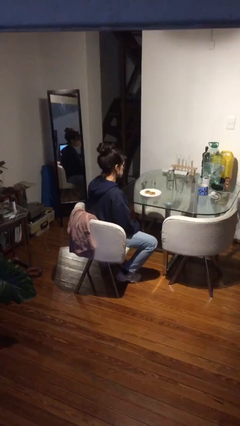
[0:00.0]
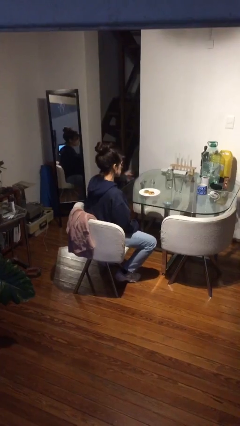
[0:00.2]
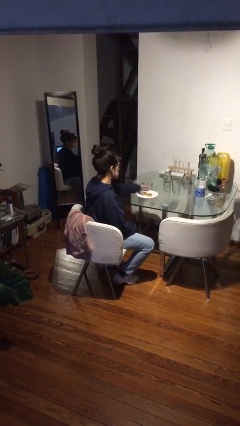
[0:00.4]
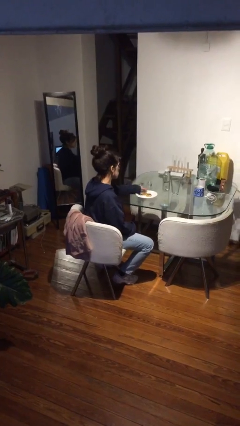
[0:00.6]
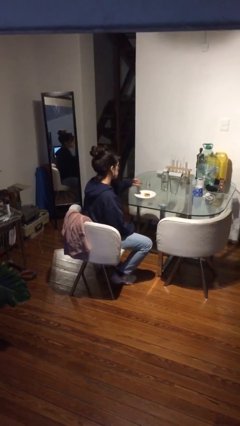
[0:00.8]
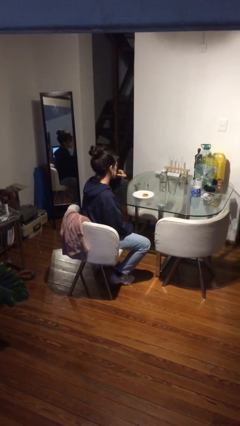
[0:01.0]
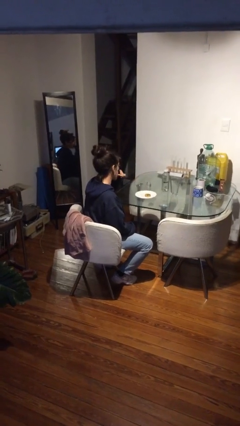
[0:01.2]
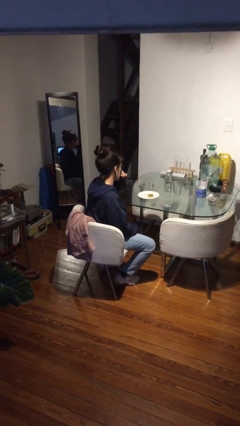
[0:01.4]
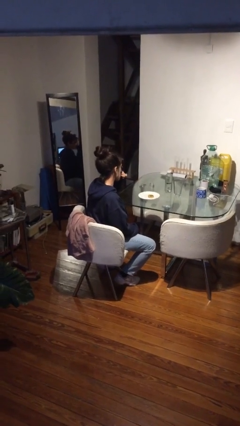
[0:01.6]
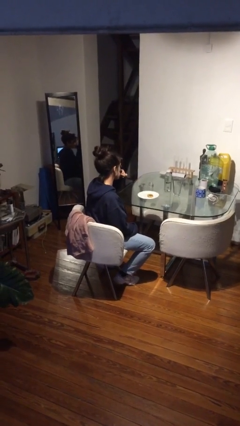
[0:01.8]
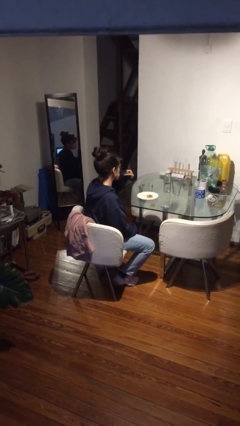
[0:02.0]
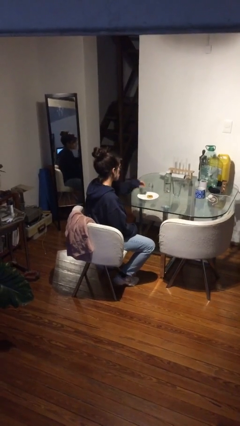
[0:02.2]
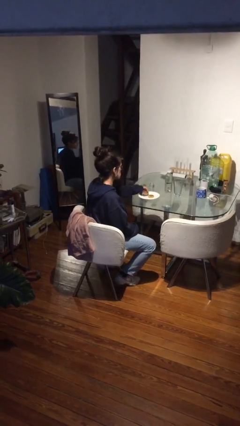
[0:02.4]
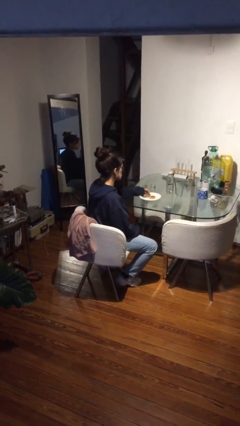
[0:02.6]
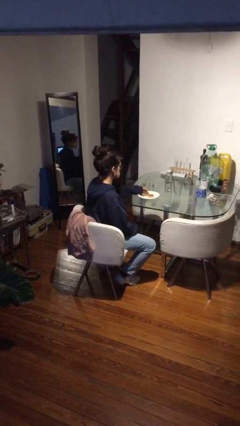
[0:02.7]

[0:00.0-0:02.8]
person eats with hands

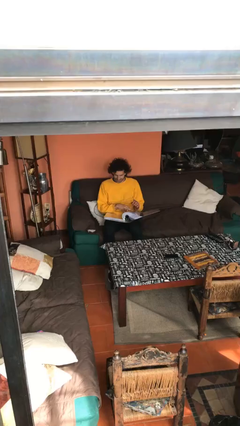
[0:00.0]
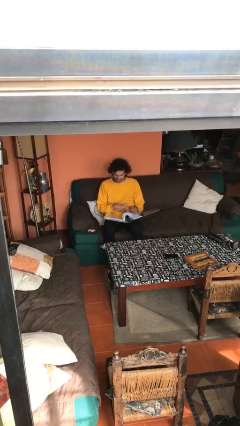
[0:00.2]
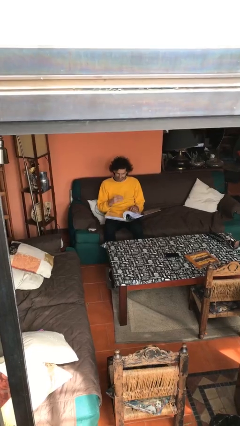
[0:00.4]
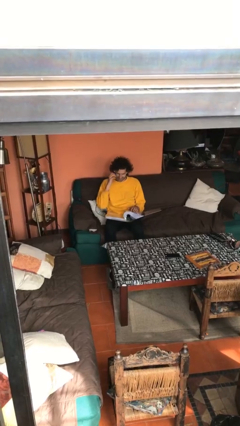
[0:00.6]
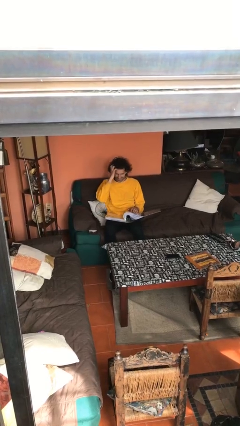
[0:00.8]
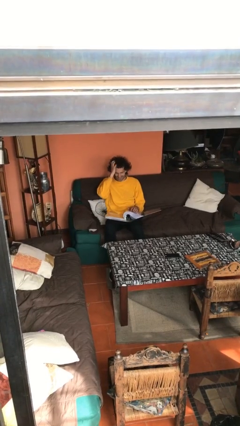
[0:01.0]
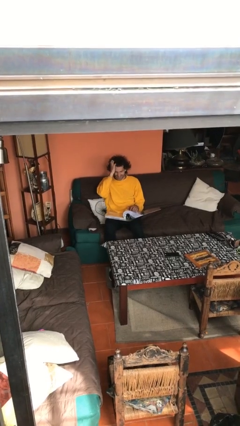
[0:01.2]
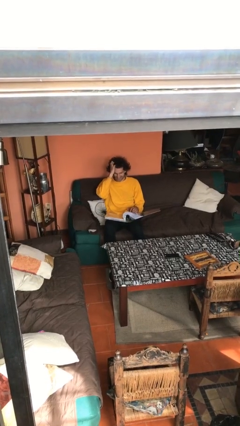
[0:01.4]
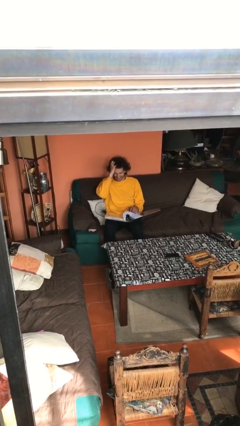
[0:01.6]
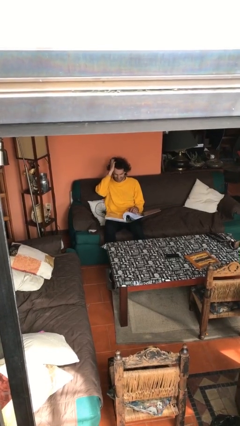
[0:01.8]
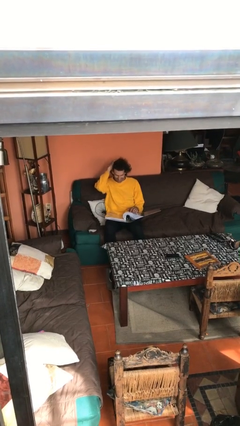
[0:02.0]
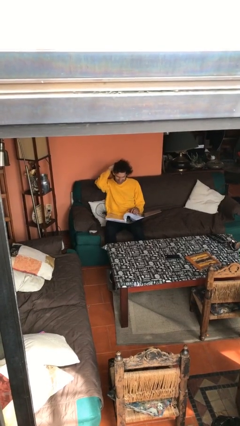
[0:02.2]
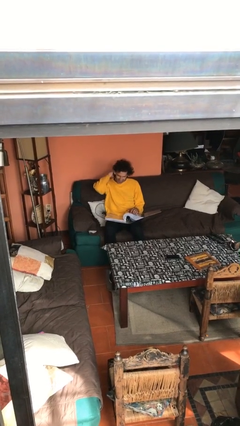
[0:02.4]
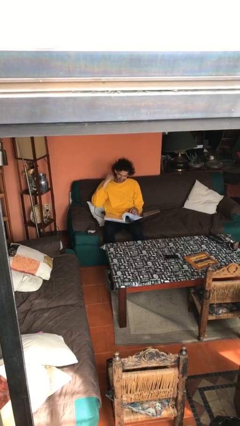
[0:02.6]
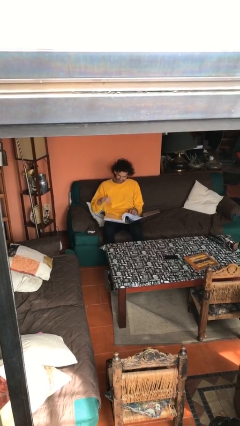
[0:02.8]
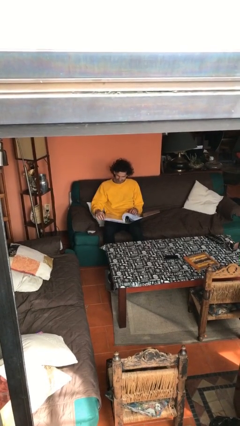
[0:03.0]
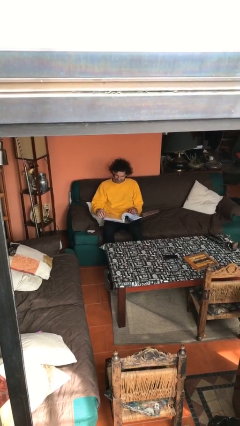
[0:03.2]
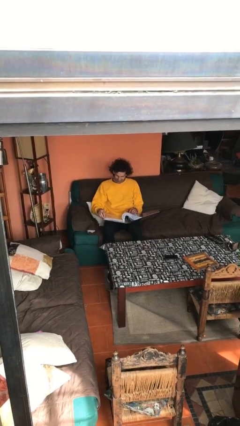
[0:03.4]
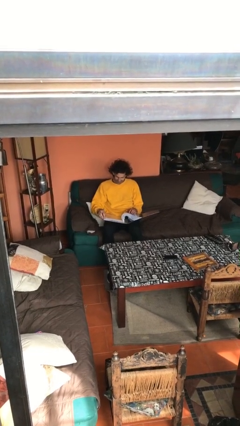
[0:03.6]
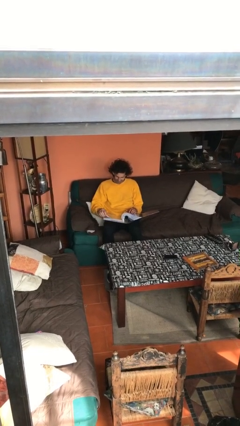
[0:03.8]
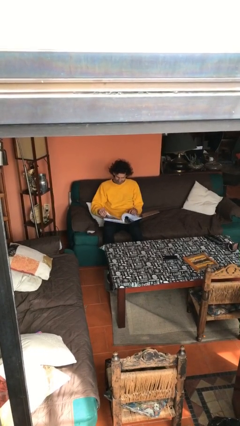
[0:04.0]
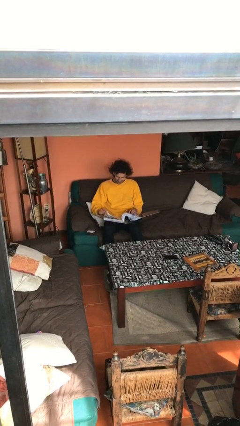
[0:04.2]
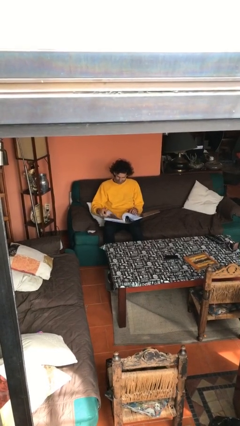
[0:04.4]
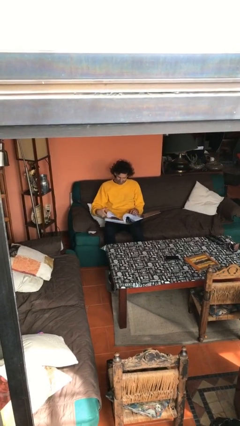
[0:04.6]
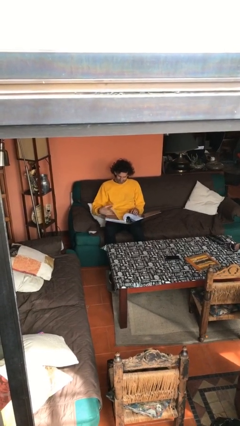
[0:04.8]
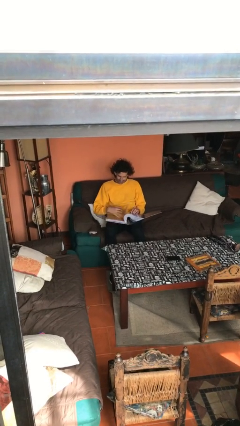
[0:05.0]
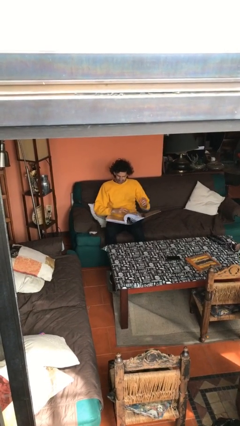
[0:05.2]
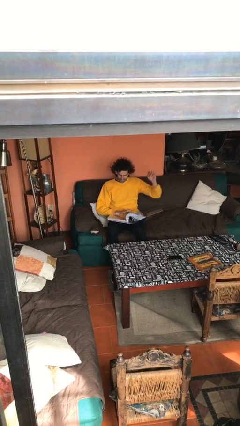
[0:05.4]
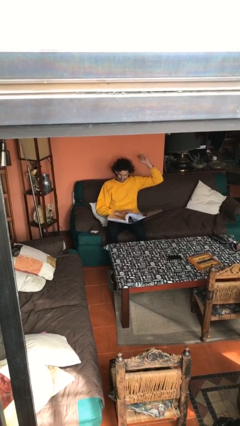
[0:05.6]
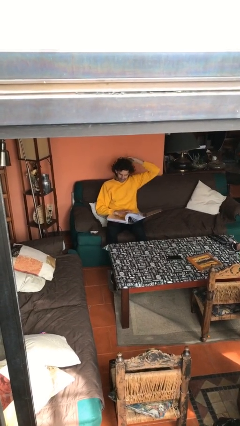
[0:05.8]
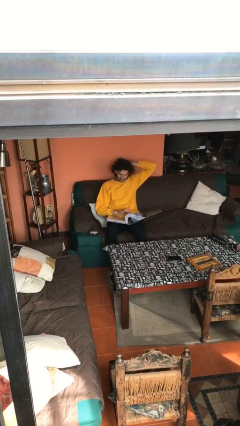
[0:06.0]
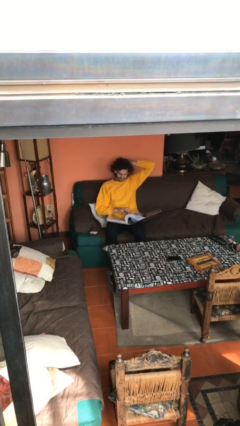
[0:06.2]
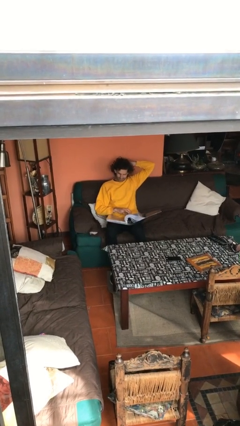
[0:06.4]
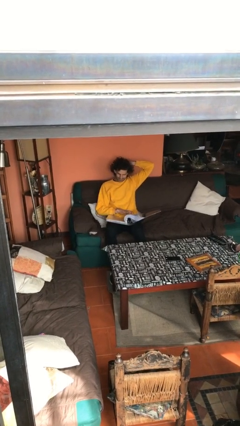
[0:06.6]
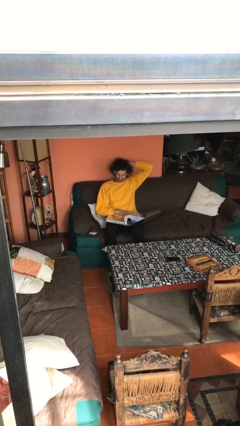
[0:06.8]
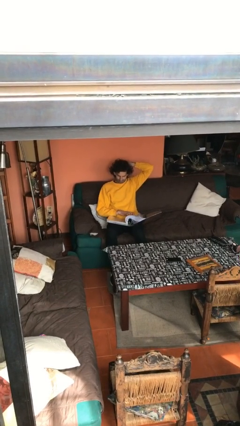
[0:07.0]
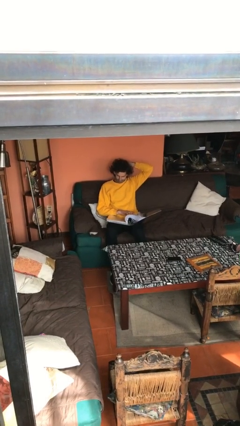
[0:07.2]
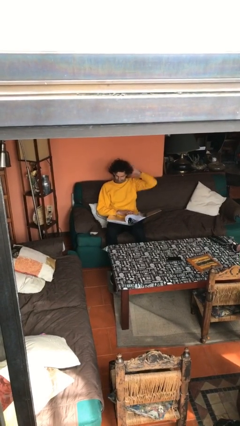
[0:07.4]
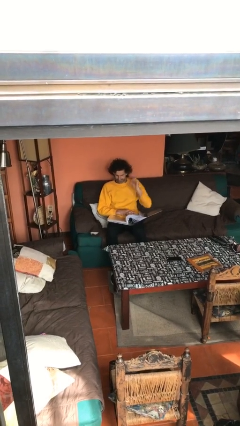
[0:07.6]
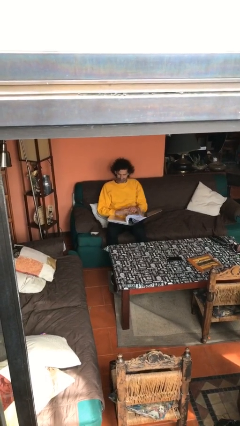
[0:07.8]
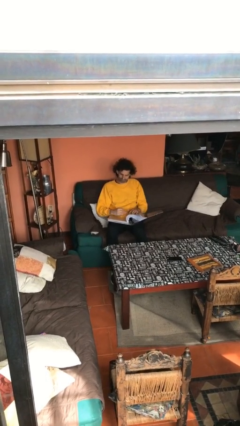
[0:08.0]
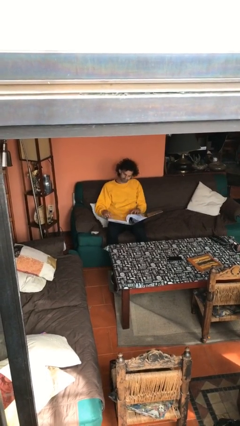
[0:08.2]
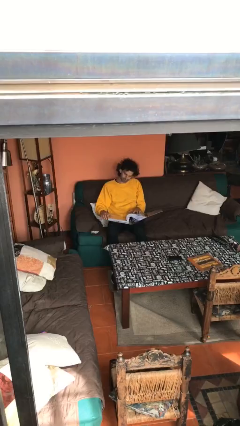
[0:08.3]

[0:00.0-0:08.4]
person reads document

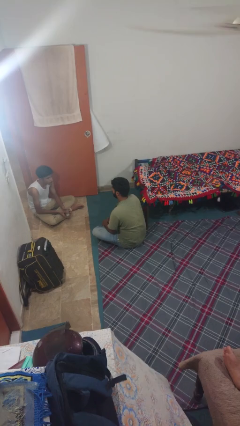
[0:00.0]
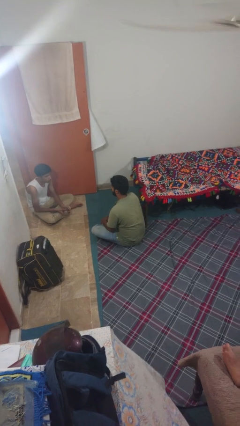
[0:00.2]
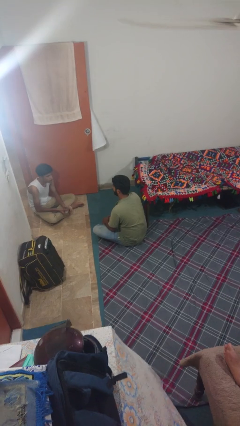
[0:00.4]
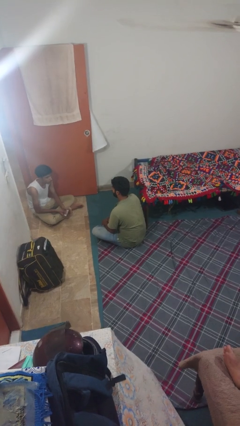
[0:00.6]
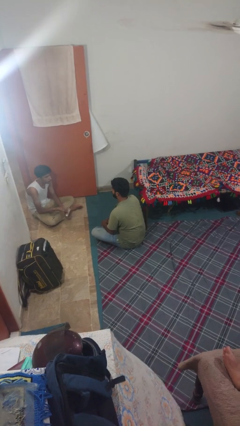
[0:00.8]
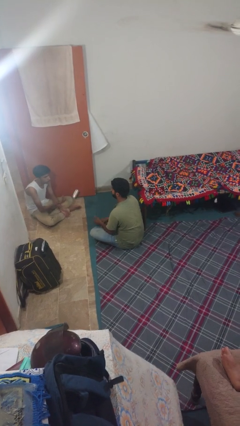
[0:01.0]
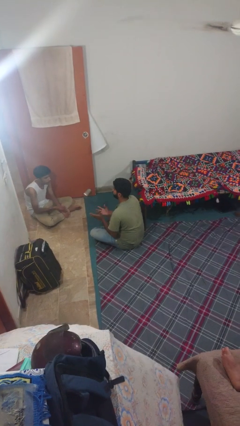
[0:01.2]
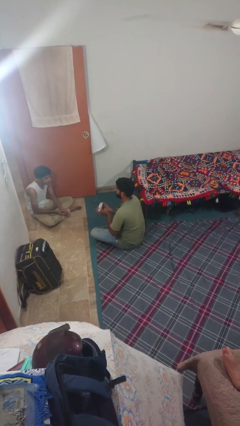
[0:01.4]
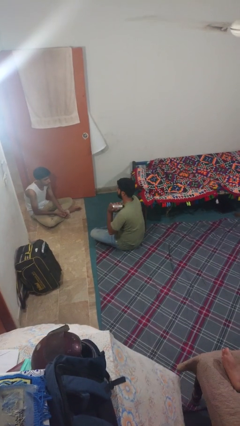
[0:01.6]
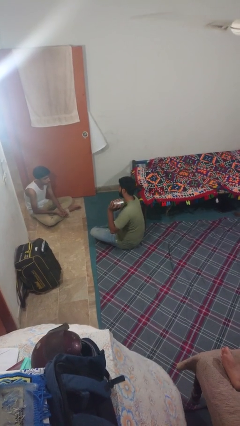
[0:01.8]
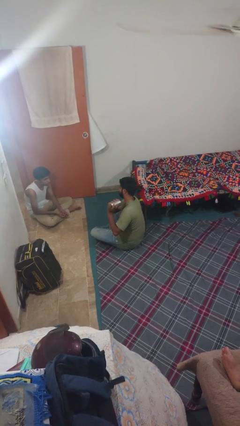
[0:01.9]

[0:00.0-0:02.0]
person catches object from person

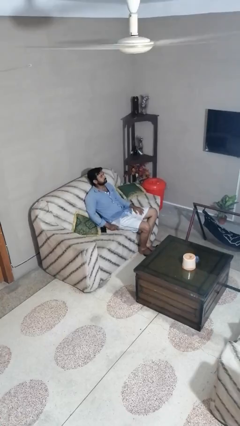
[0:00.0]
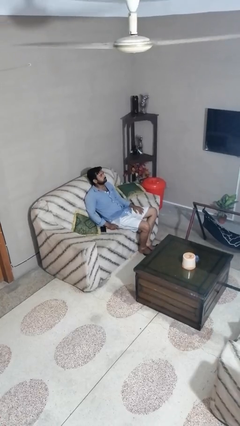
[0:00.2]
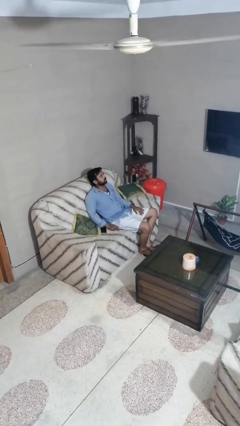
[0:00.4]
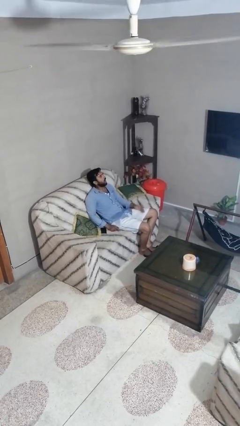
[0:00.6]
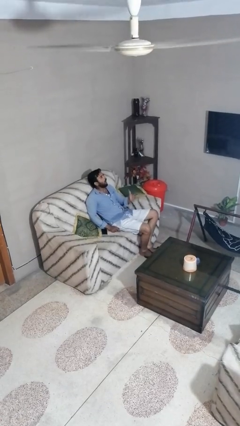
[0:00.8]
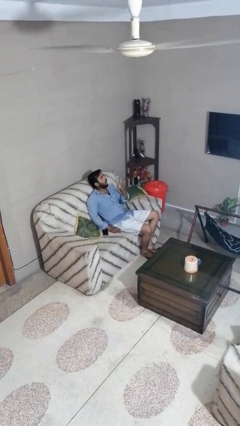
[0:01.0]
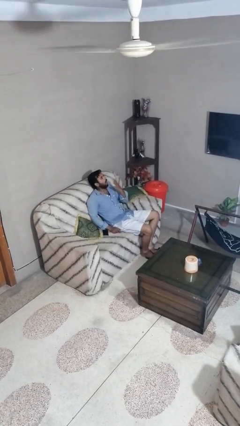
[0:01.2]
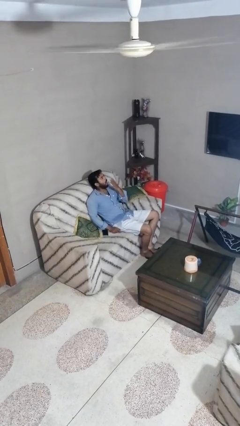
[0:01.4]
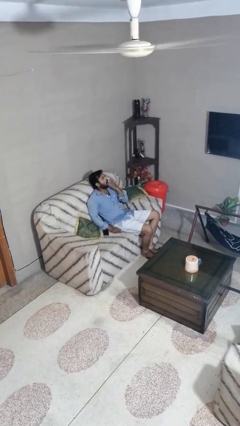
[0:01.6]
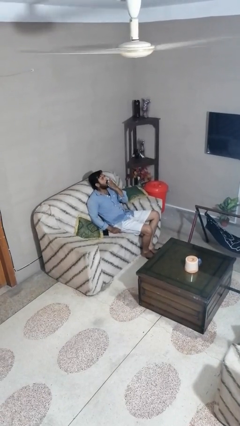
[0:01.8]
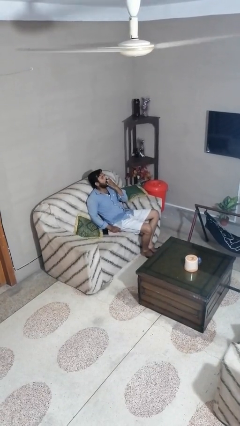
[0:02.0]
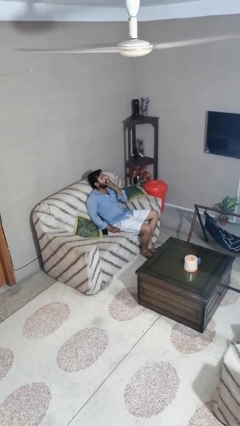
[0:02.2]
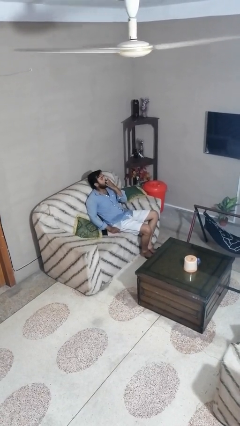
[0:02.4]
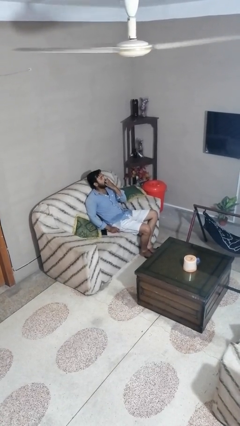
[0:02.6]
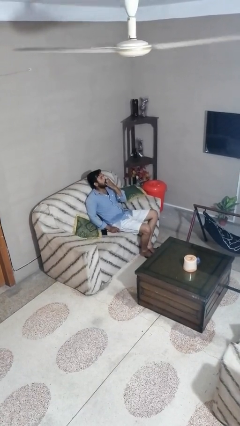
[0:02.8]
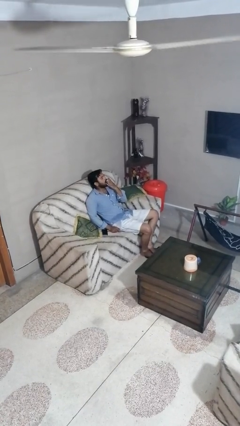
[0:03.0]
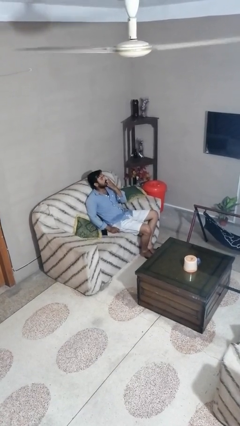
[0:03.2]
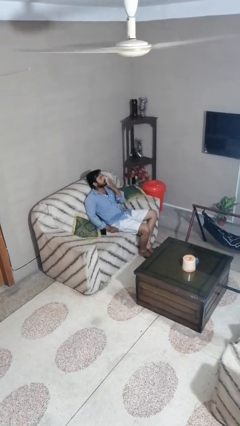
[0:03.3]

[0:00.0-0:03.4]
person yawns

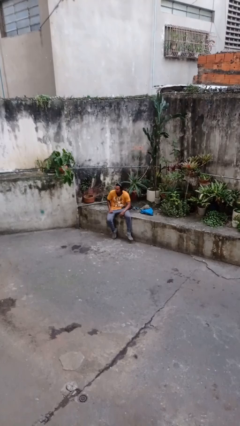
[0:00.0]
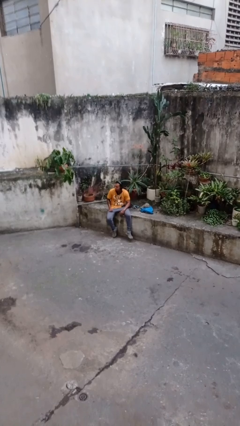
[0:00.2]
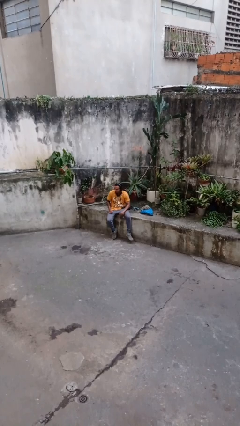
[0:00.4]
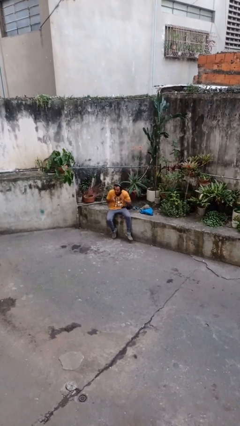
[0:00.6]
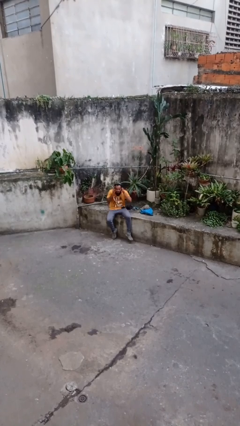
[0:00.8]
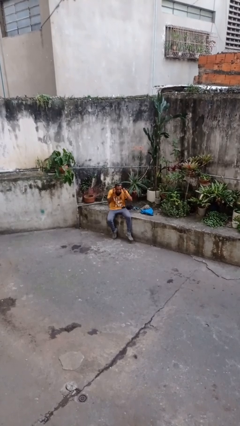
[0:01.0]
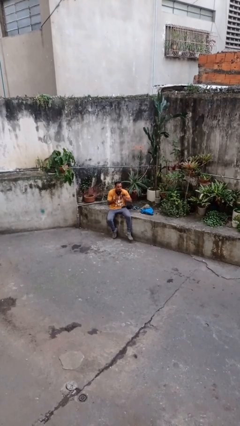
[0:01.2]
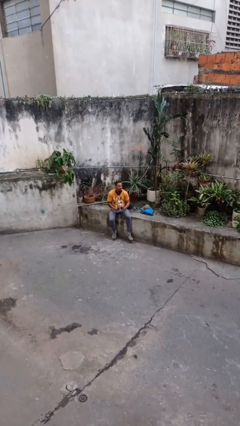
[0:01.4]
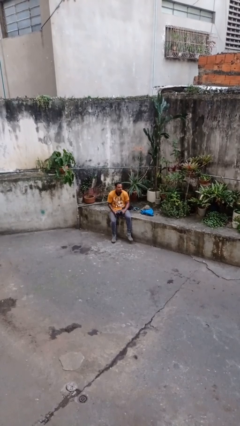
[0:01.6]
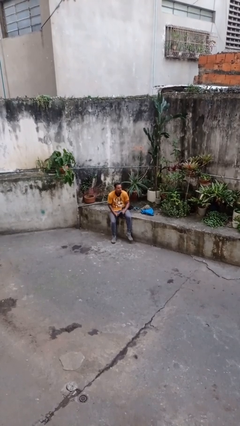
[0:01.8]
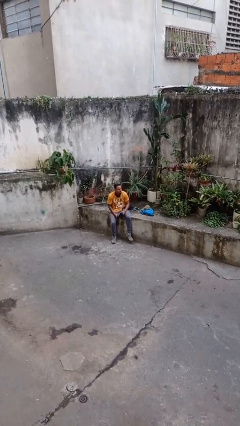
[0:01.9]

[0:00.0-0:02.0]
person takes off headphones
